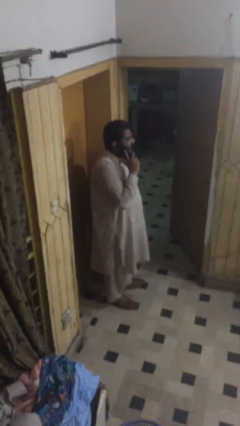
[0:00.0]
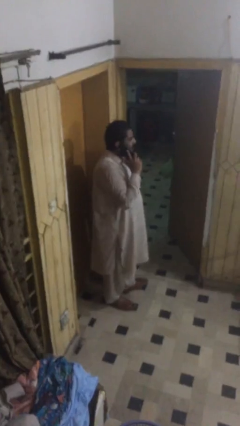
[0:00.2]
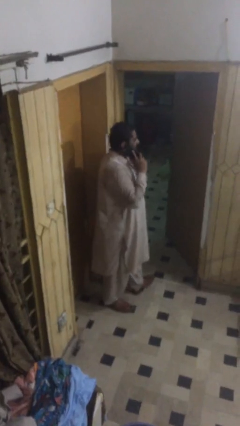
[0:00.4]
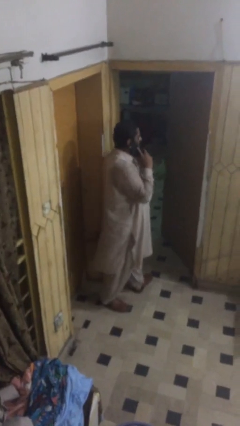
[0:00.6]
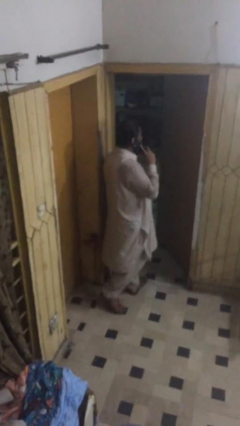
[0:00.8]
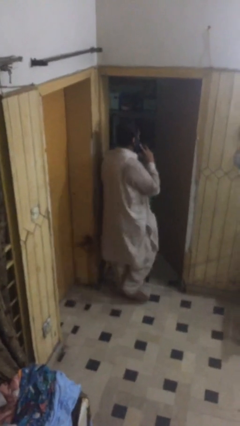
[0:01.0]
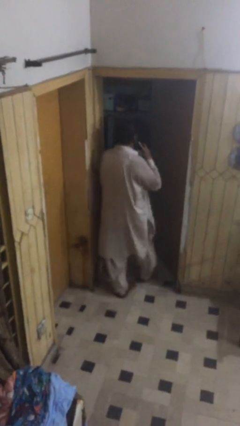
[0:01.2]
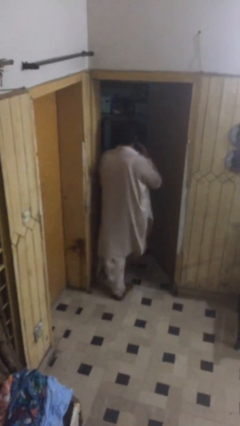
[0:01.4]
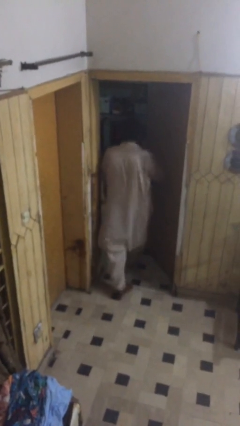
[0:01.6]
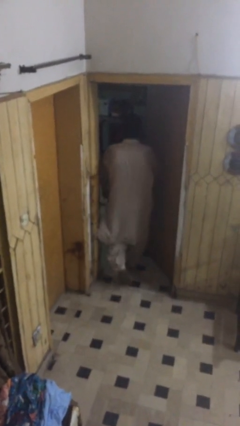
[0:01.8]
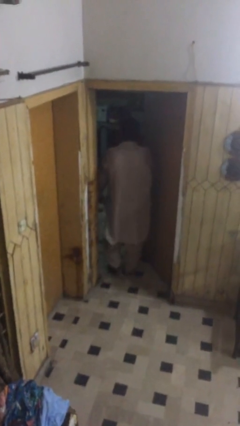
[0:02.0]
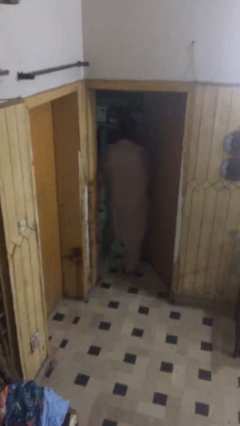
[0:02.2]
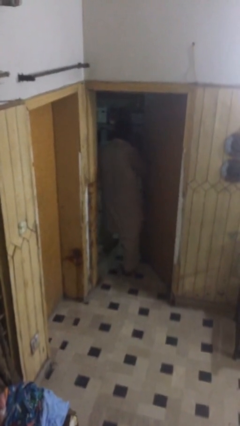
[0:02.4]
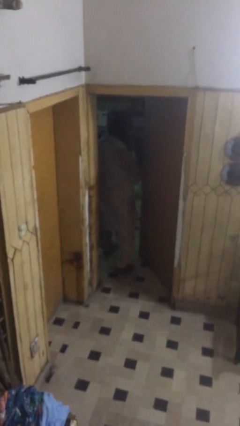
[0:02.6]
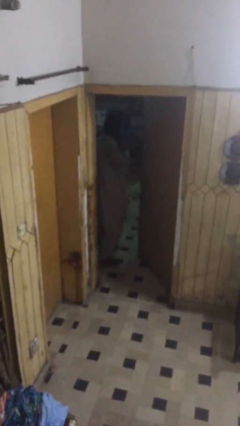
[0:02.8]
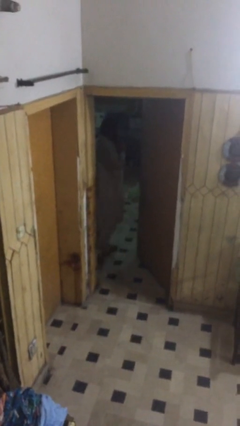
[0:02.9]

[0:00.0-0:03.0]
person exits scene through structure

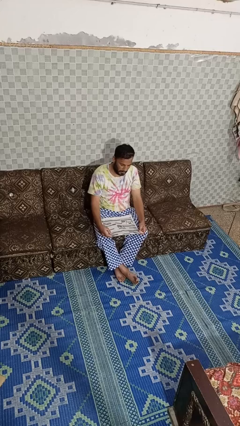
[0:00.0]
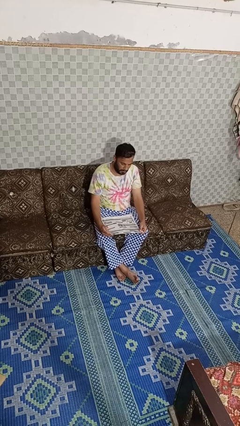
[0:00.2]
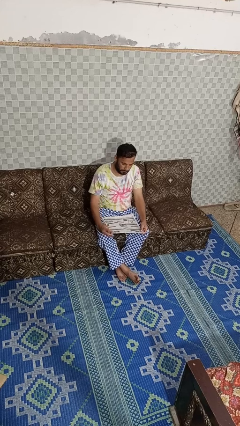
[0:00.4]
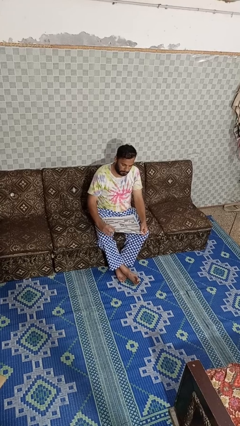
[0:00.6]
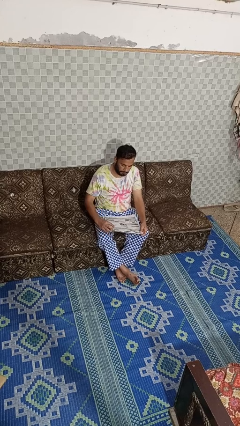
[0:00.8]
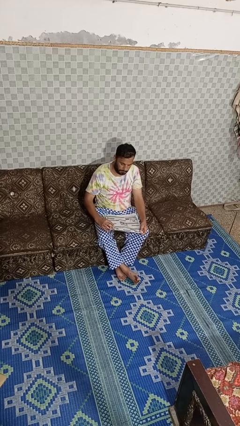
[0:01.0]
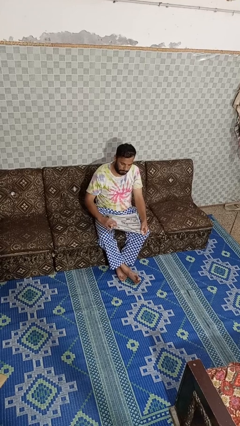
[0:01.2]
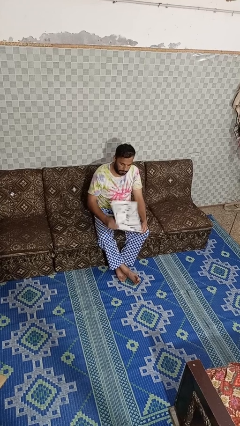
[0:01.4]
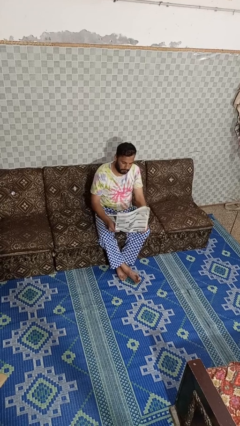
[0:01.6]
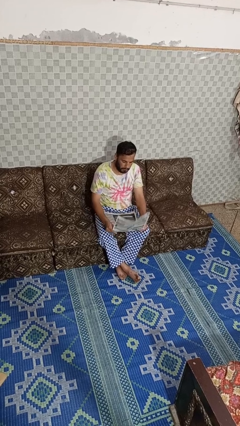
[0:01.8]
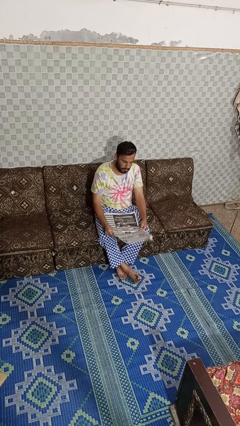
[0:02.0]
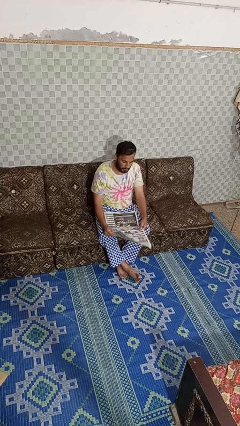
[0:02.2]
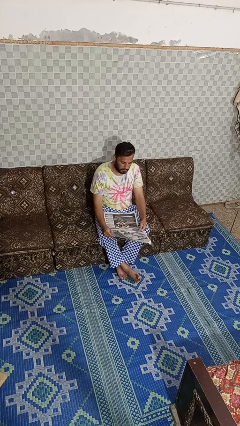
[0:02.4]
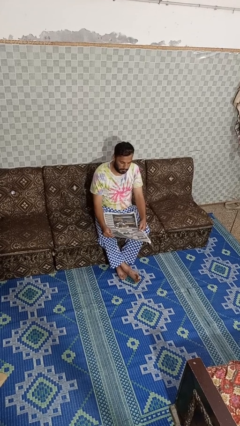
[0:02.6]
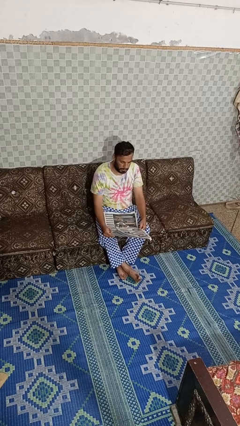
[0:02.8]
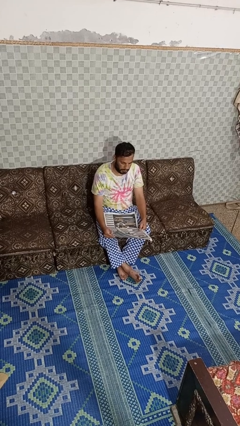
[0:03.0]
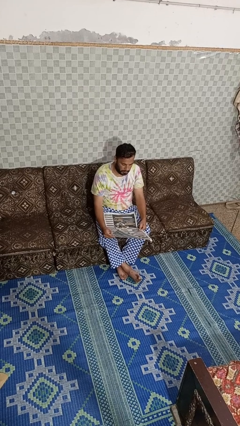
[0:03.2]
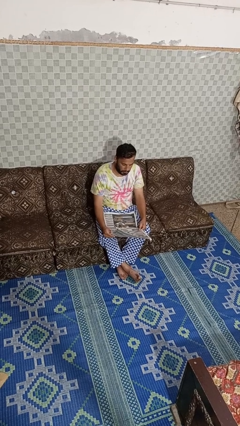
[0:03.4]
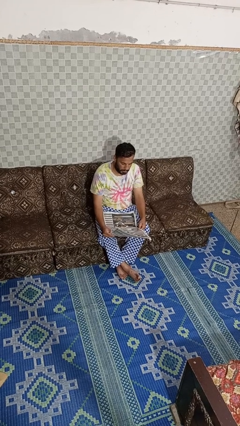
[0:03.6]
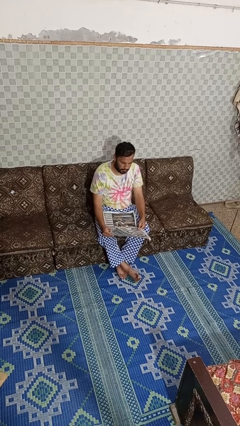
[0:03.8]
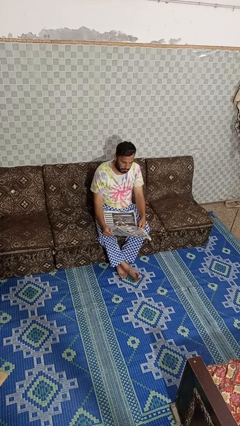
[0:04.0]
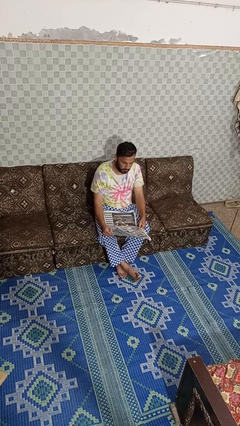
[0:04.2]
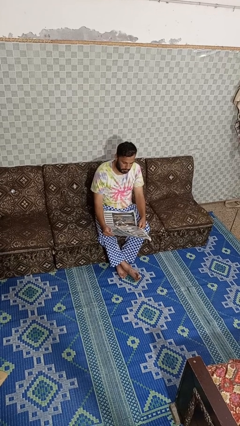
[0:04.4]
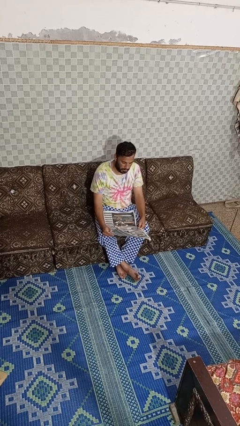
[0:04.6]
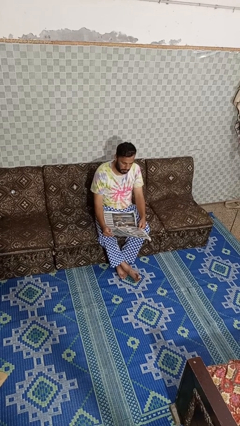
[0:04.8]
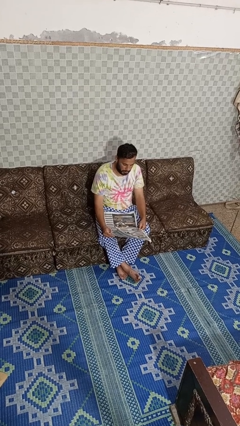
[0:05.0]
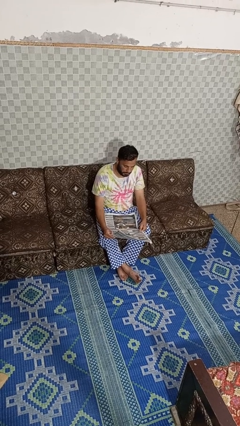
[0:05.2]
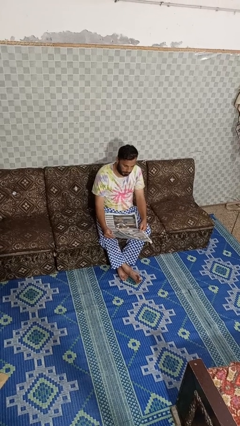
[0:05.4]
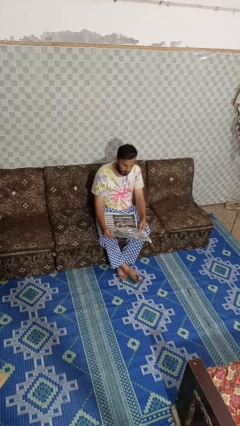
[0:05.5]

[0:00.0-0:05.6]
person reads newspaper

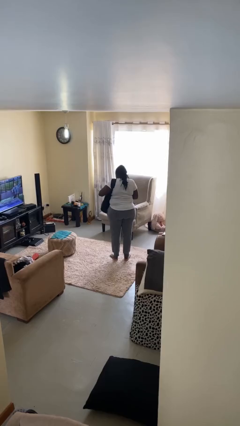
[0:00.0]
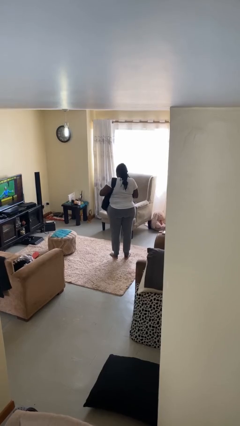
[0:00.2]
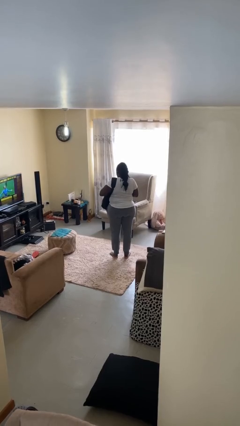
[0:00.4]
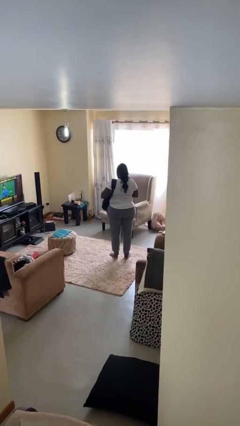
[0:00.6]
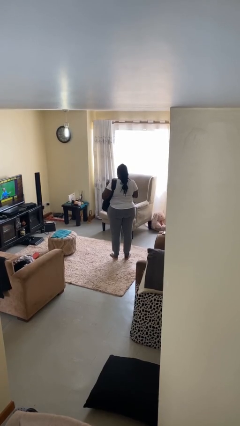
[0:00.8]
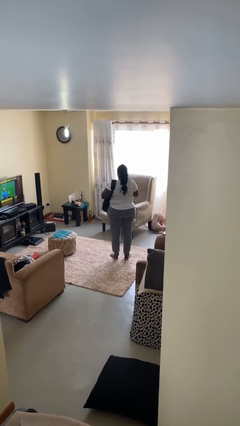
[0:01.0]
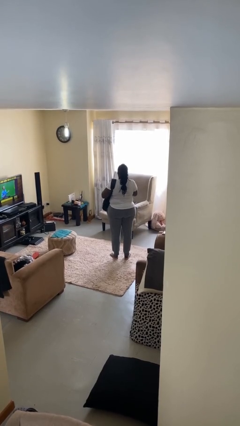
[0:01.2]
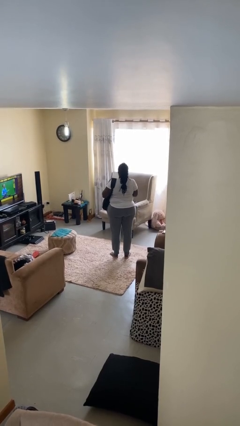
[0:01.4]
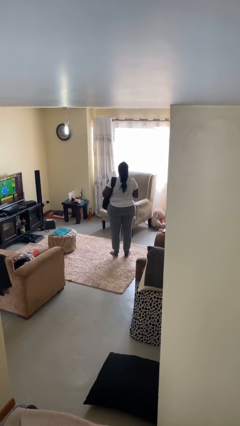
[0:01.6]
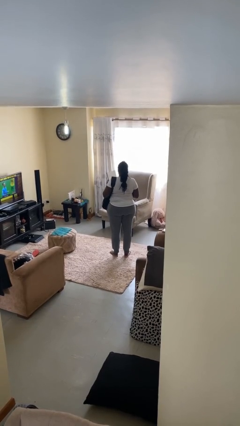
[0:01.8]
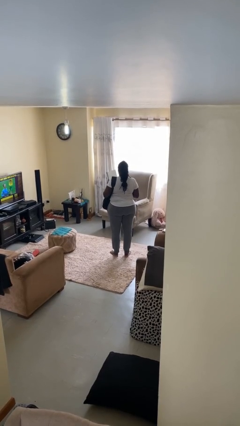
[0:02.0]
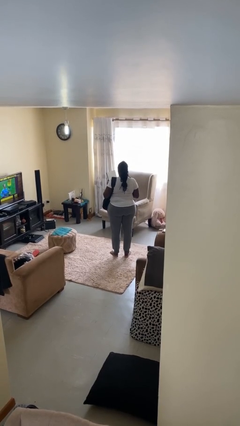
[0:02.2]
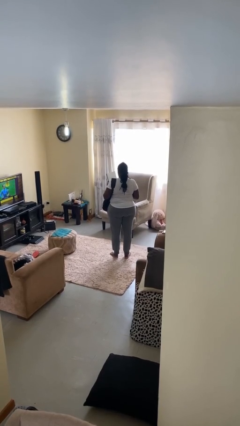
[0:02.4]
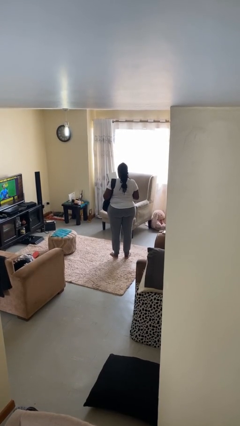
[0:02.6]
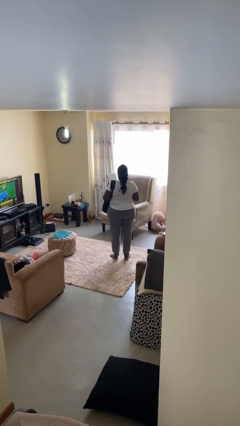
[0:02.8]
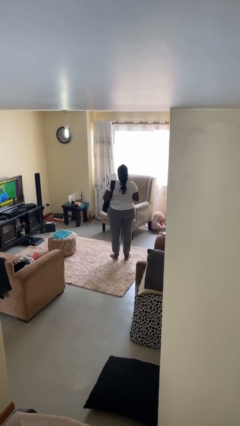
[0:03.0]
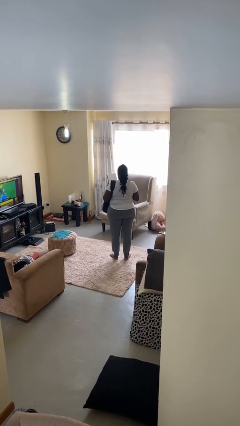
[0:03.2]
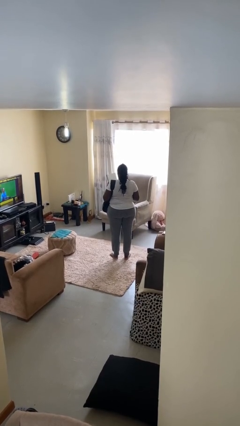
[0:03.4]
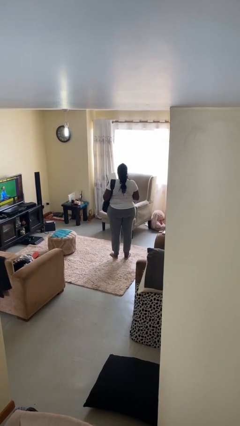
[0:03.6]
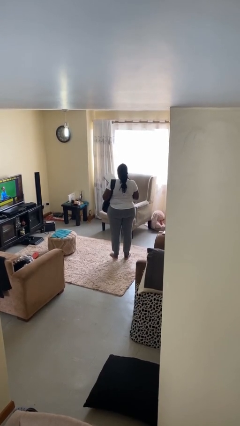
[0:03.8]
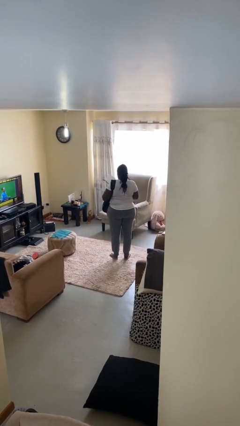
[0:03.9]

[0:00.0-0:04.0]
person takes object from backpack

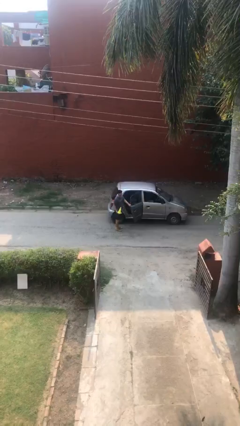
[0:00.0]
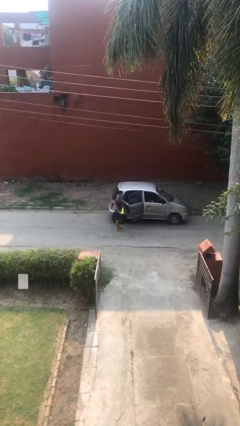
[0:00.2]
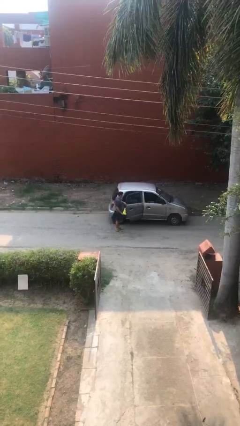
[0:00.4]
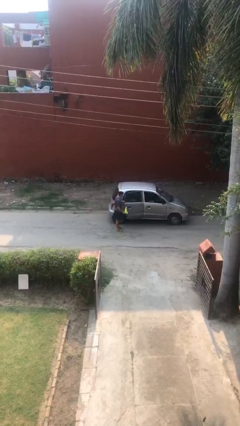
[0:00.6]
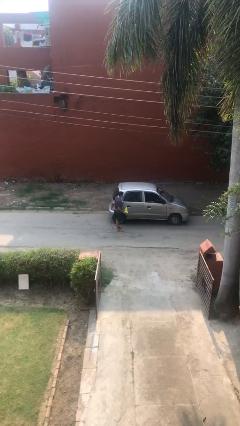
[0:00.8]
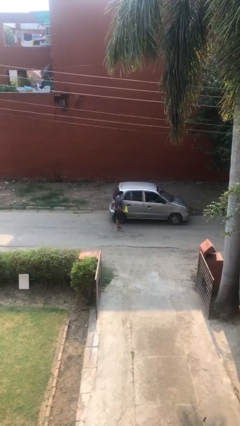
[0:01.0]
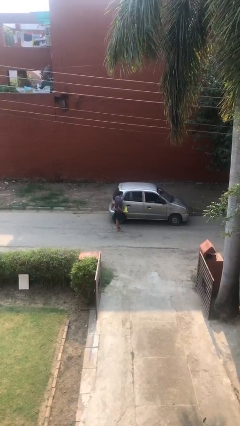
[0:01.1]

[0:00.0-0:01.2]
person closes car door

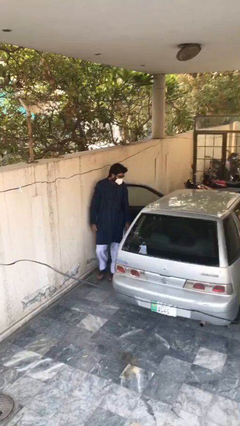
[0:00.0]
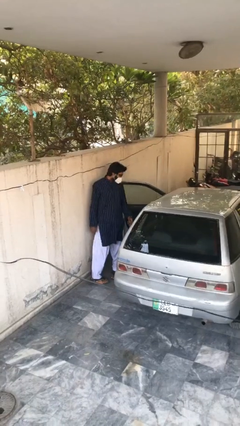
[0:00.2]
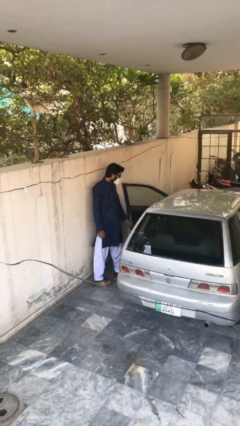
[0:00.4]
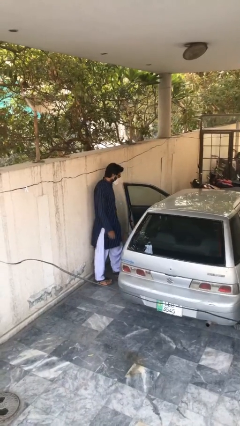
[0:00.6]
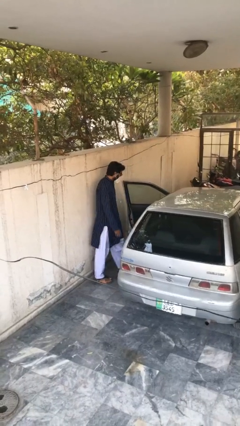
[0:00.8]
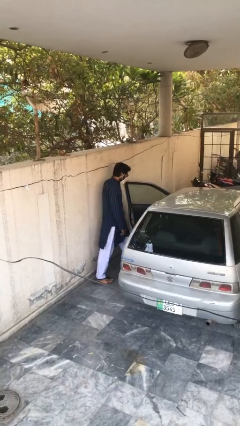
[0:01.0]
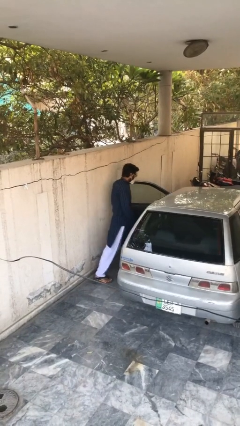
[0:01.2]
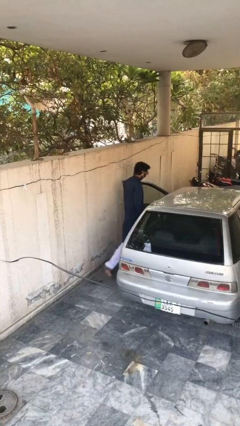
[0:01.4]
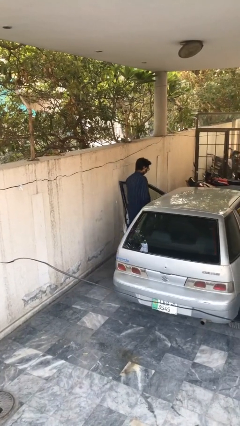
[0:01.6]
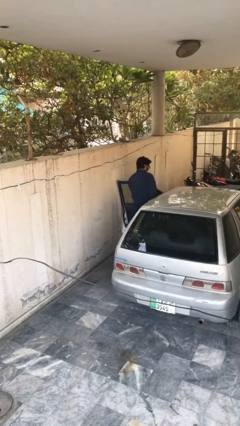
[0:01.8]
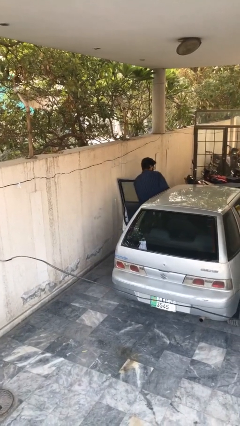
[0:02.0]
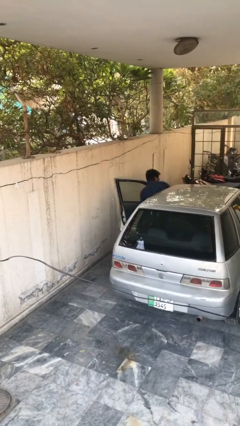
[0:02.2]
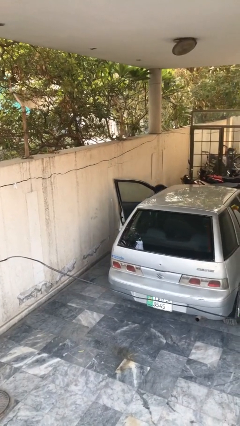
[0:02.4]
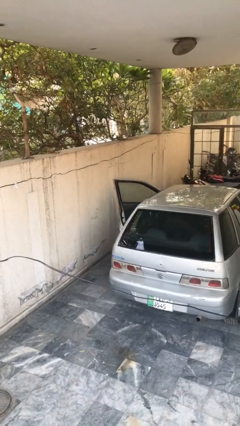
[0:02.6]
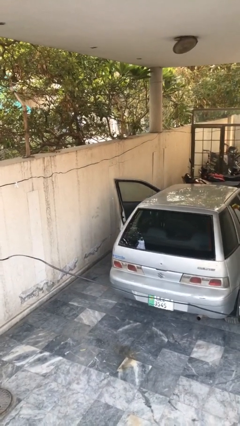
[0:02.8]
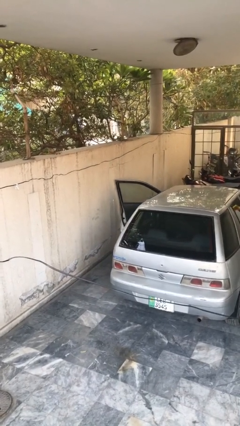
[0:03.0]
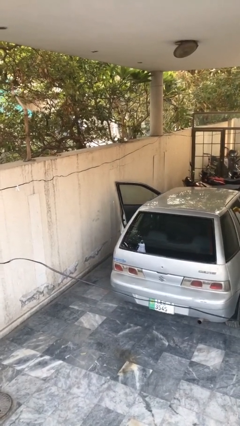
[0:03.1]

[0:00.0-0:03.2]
person enters car

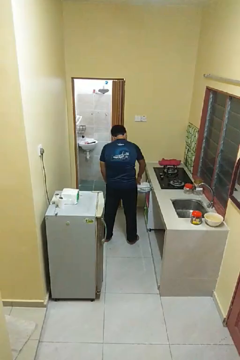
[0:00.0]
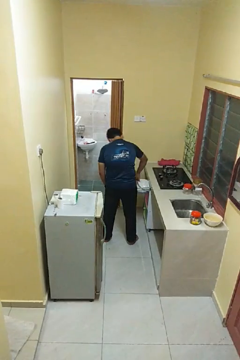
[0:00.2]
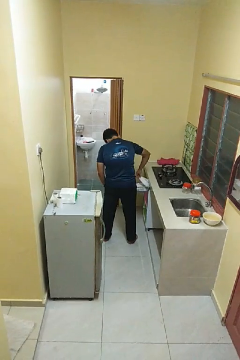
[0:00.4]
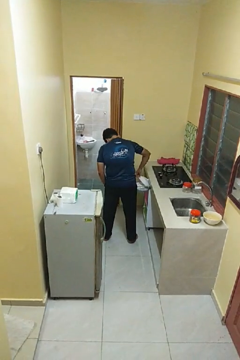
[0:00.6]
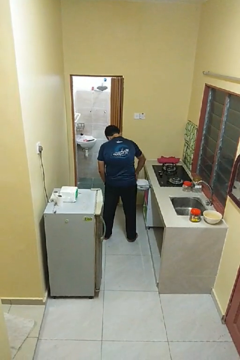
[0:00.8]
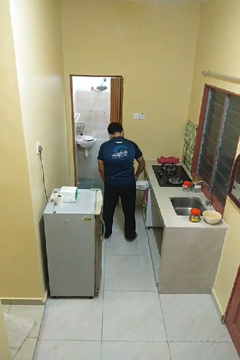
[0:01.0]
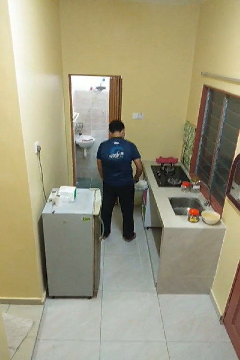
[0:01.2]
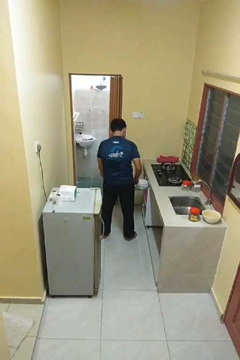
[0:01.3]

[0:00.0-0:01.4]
person searches in kitchen drawer
